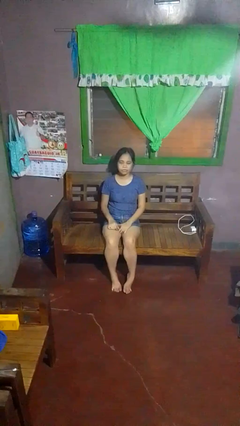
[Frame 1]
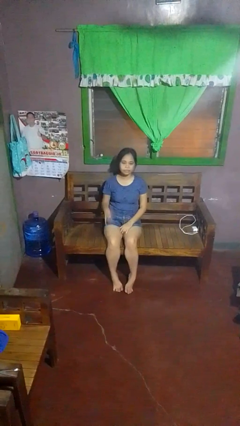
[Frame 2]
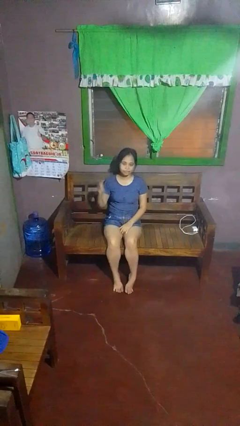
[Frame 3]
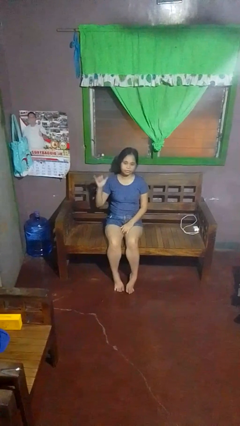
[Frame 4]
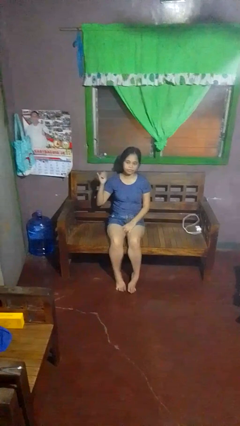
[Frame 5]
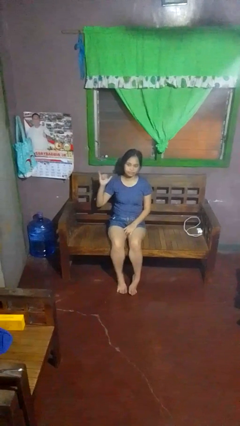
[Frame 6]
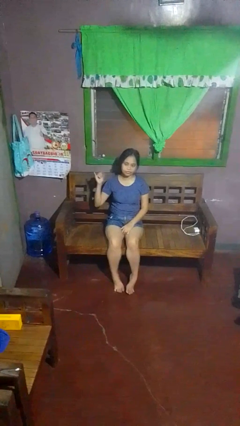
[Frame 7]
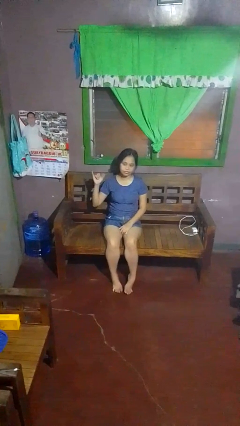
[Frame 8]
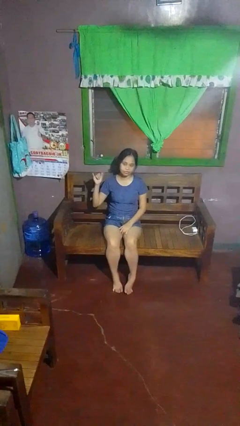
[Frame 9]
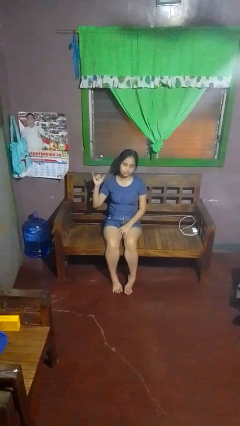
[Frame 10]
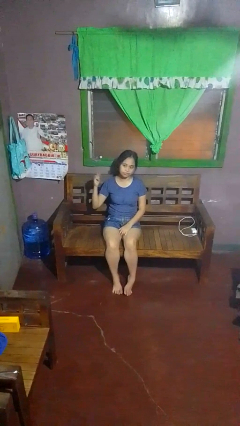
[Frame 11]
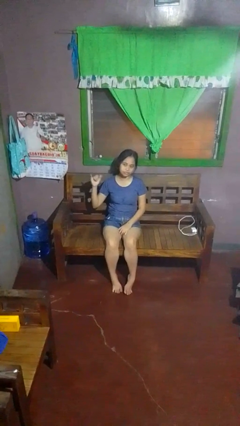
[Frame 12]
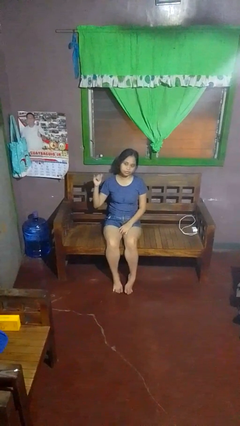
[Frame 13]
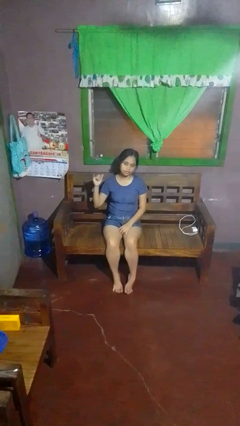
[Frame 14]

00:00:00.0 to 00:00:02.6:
person gestures hang loose

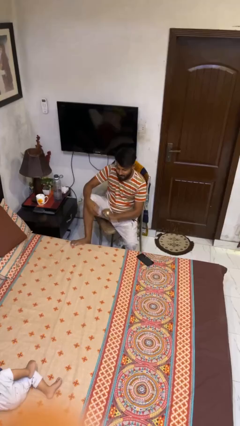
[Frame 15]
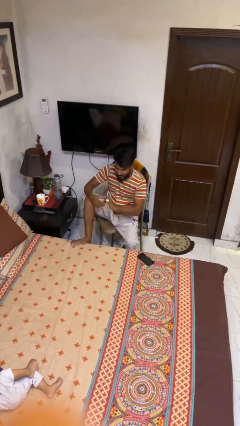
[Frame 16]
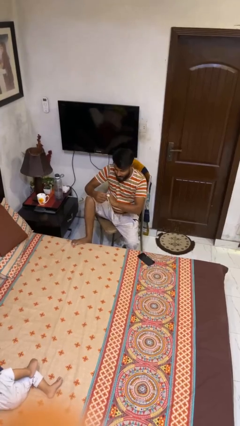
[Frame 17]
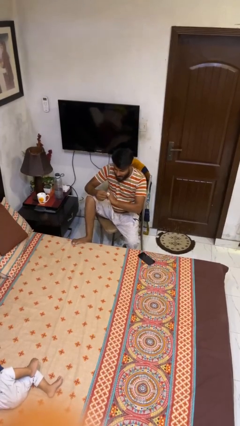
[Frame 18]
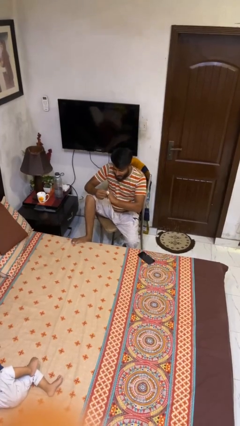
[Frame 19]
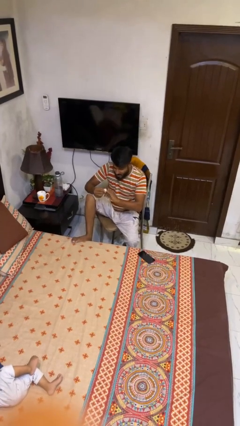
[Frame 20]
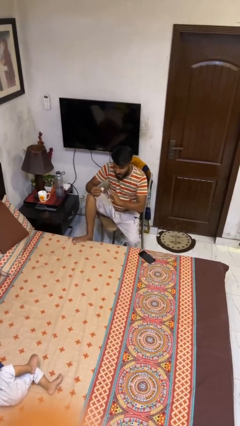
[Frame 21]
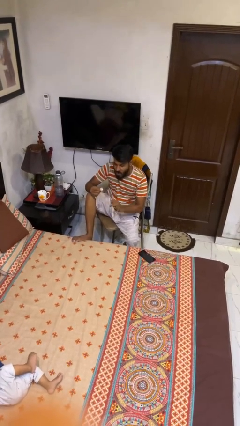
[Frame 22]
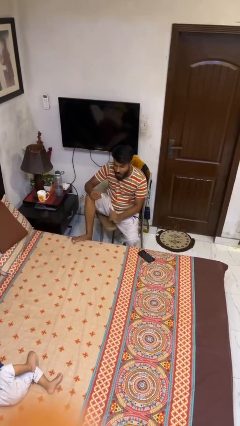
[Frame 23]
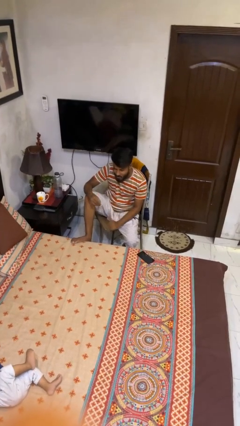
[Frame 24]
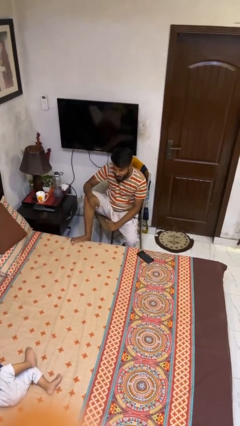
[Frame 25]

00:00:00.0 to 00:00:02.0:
person takes off ring

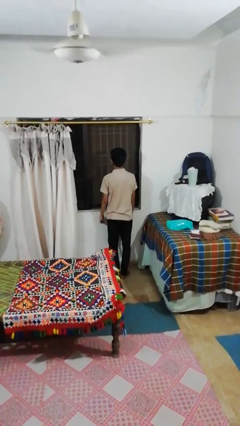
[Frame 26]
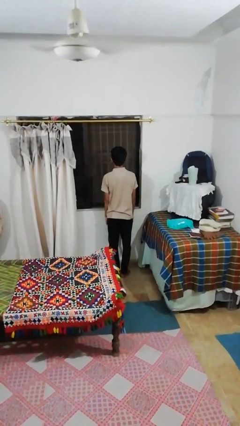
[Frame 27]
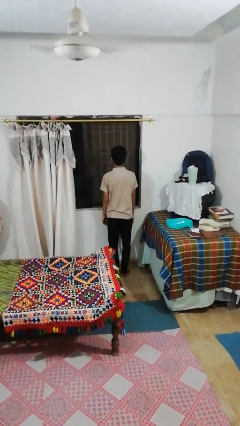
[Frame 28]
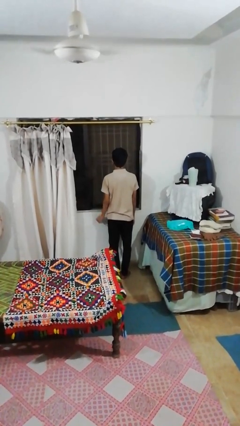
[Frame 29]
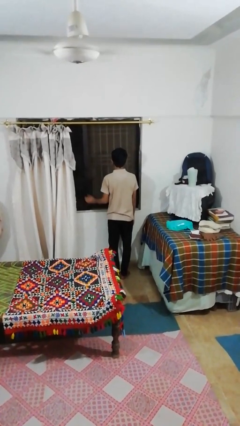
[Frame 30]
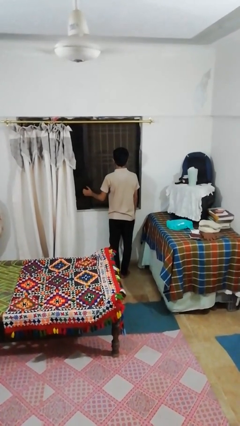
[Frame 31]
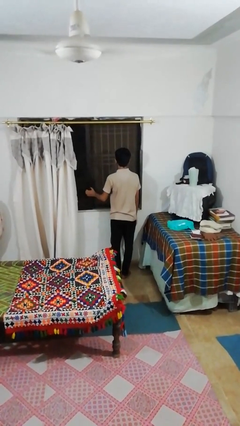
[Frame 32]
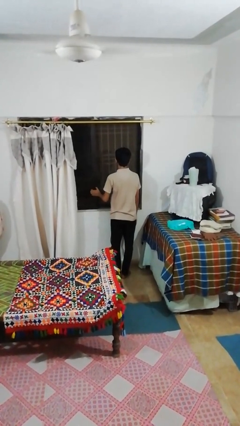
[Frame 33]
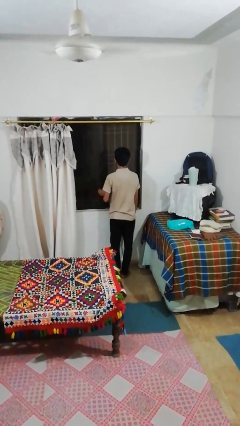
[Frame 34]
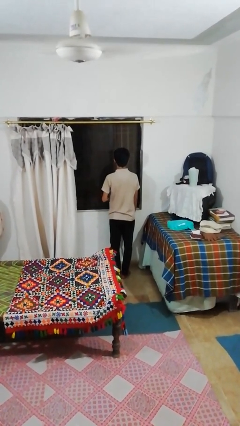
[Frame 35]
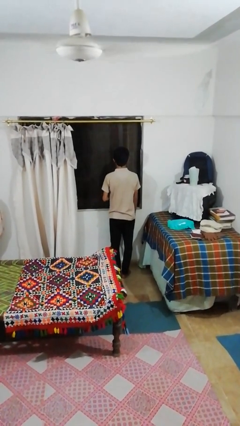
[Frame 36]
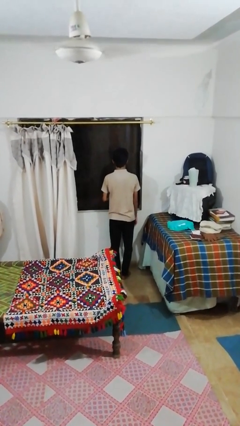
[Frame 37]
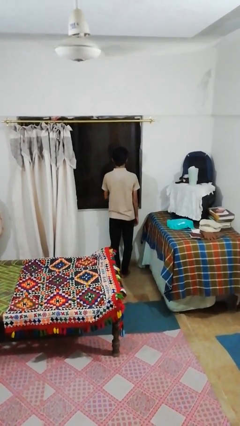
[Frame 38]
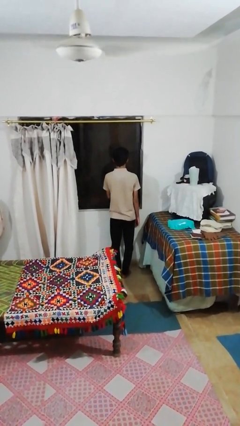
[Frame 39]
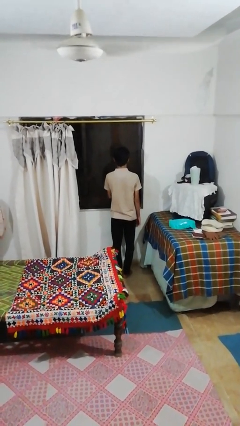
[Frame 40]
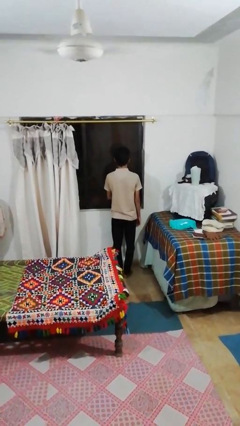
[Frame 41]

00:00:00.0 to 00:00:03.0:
person closes sliding door

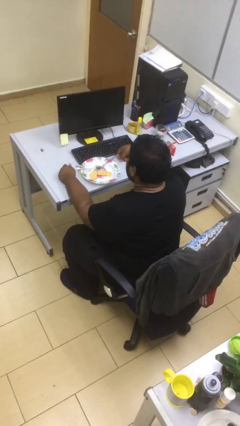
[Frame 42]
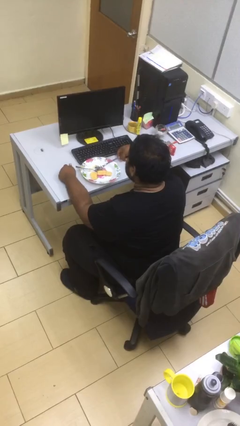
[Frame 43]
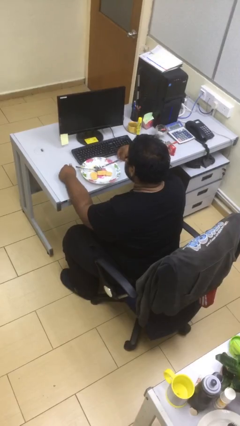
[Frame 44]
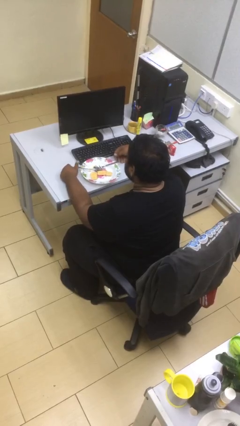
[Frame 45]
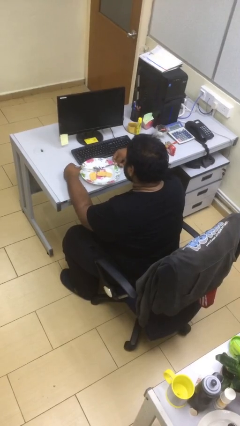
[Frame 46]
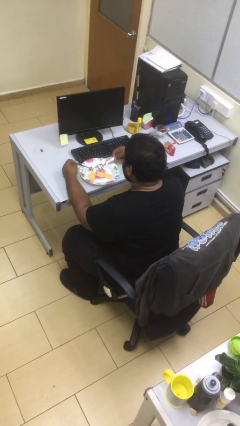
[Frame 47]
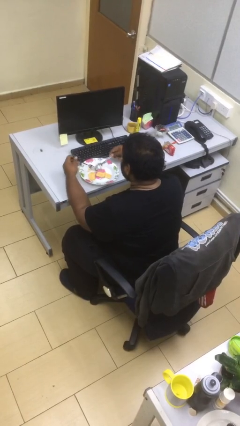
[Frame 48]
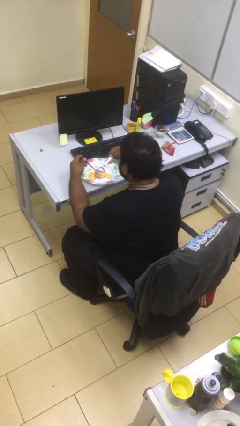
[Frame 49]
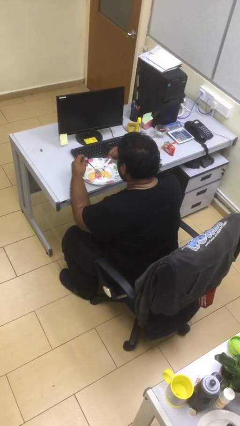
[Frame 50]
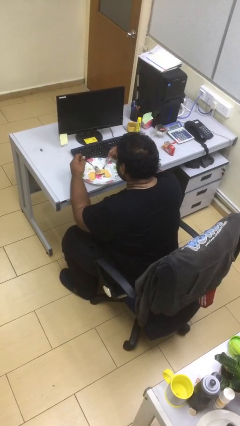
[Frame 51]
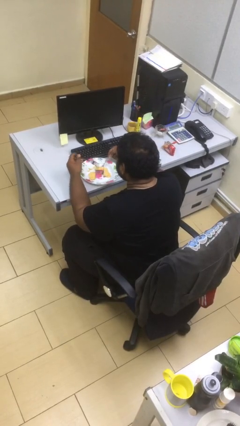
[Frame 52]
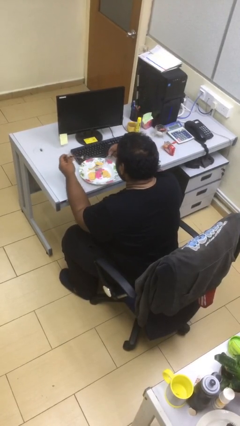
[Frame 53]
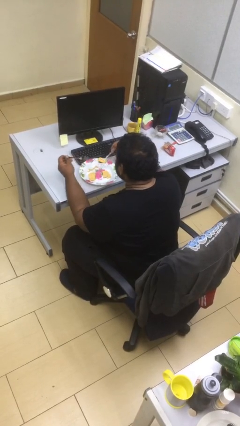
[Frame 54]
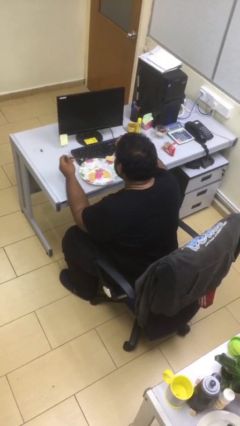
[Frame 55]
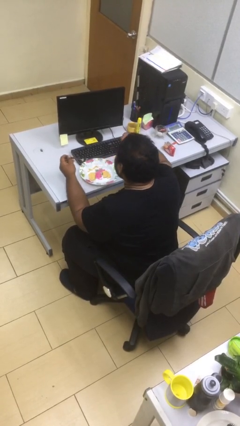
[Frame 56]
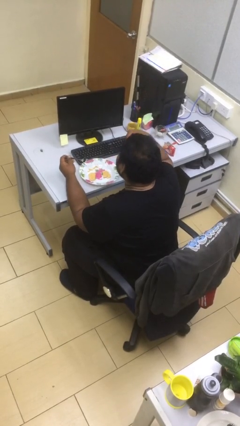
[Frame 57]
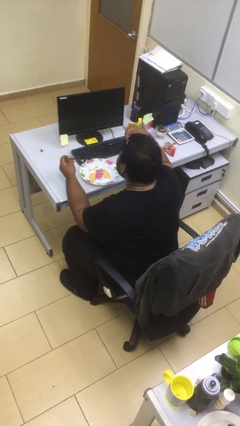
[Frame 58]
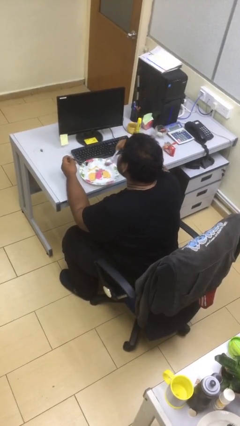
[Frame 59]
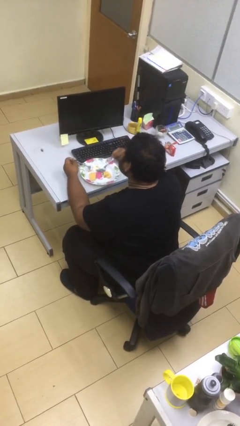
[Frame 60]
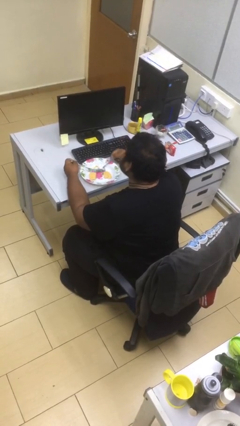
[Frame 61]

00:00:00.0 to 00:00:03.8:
person eats with utensil

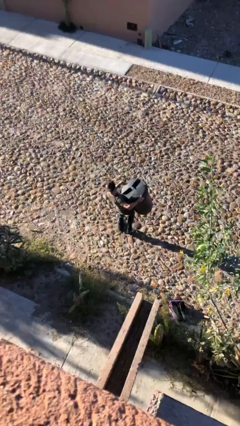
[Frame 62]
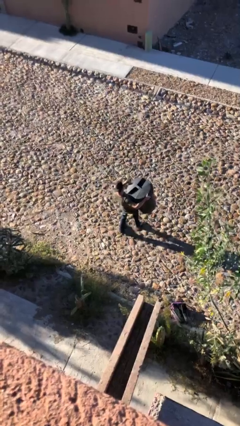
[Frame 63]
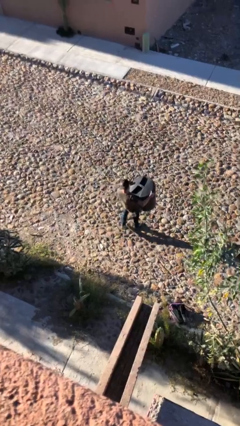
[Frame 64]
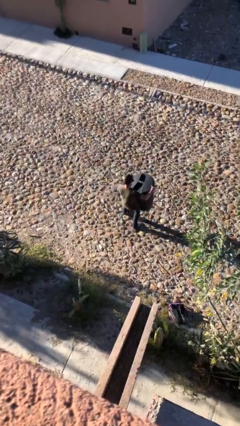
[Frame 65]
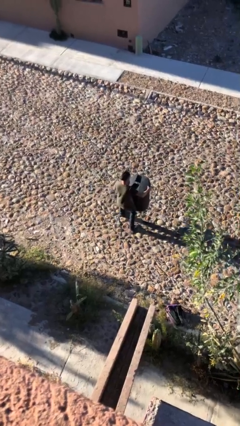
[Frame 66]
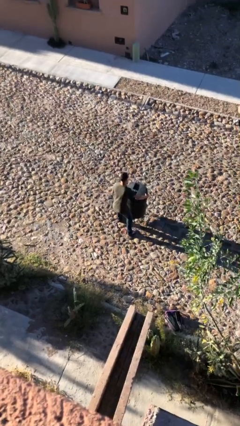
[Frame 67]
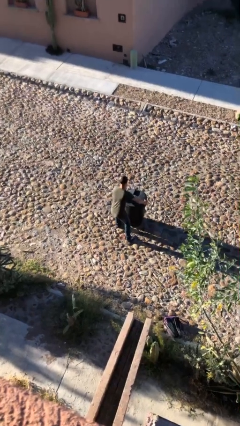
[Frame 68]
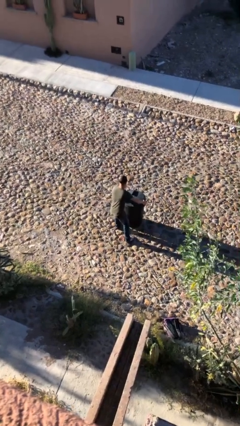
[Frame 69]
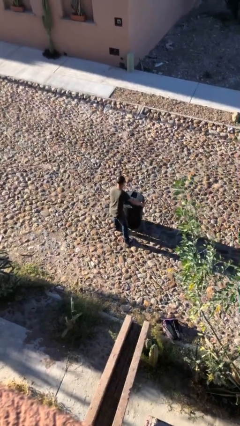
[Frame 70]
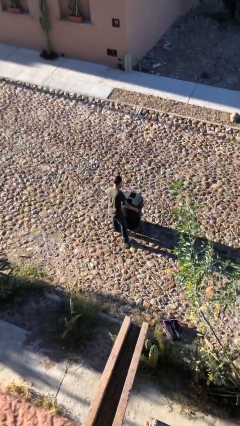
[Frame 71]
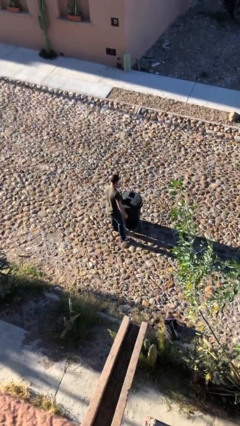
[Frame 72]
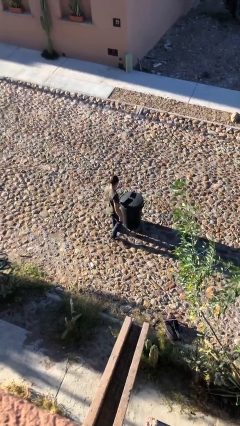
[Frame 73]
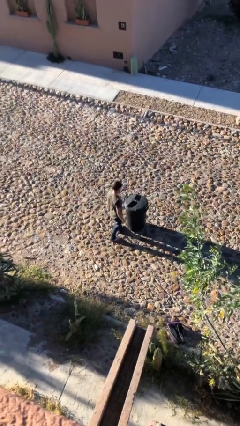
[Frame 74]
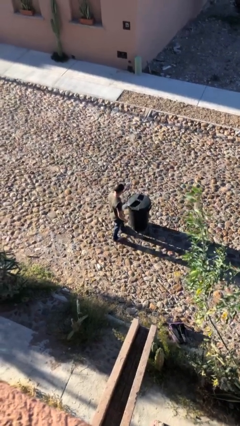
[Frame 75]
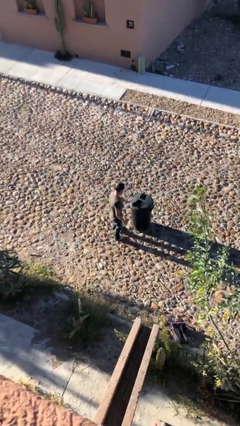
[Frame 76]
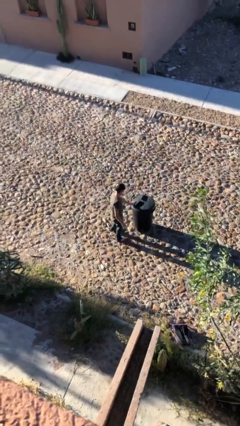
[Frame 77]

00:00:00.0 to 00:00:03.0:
person puts down object on floor

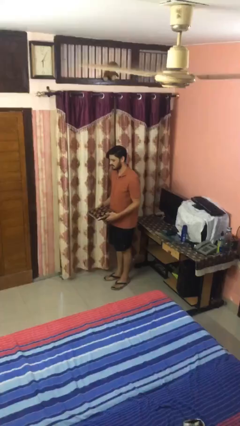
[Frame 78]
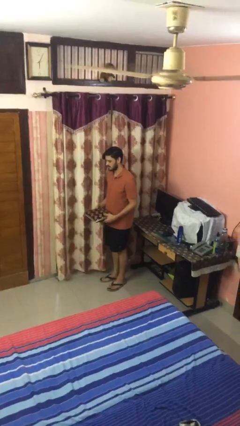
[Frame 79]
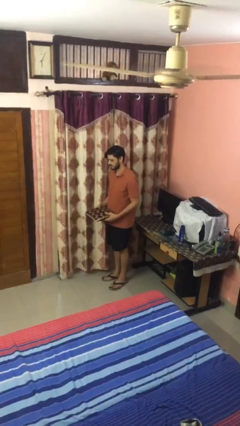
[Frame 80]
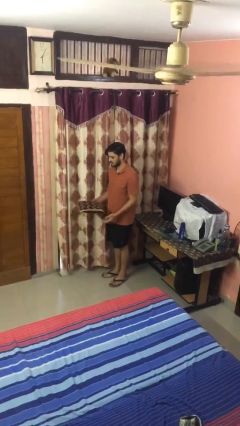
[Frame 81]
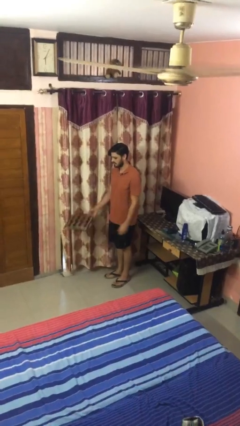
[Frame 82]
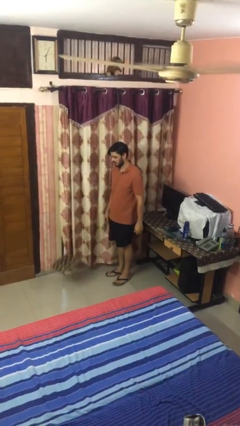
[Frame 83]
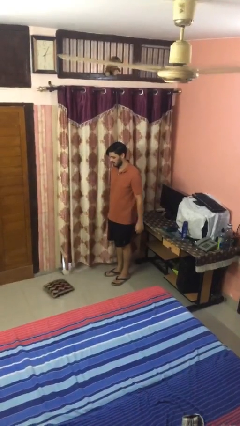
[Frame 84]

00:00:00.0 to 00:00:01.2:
person throws object to ground

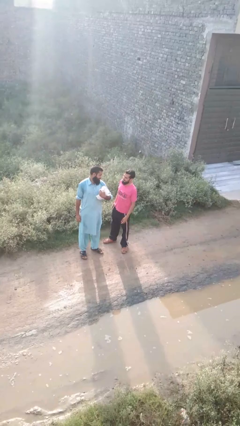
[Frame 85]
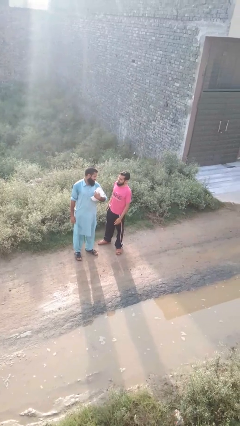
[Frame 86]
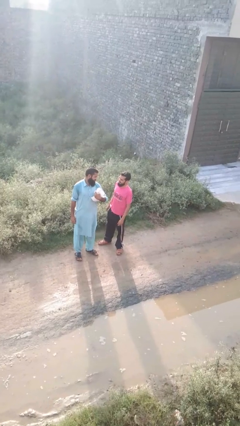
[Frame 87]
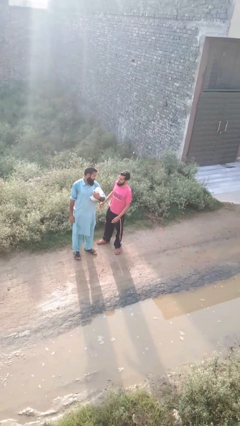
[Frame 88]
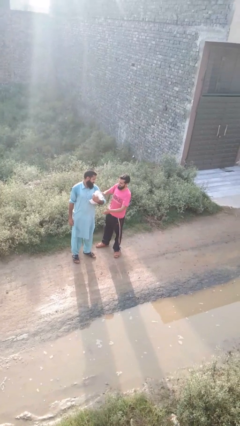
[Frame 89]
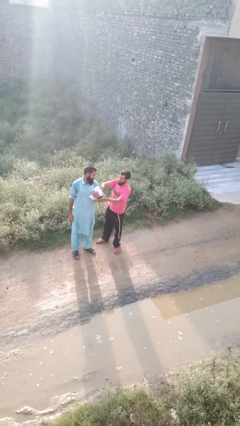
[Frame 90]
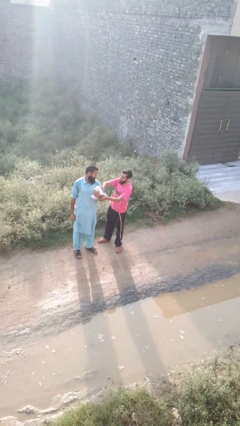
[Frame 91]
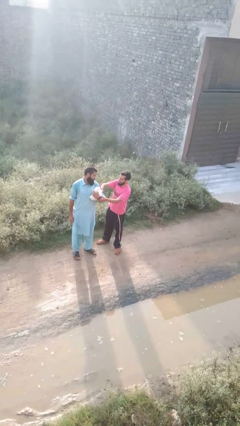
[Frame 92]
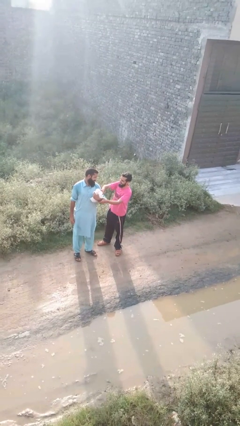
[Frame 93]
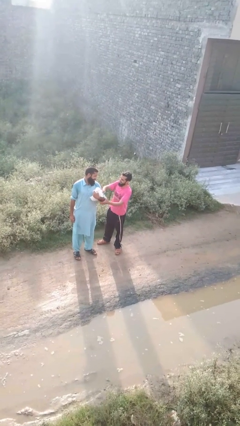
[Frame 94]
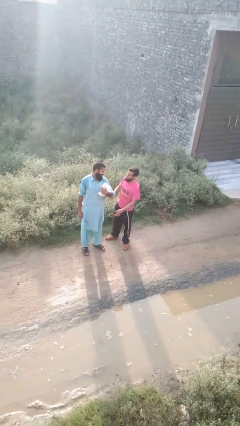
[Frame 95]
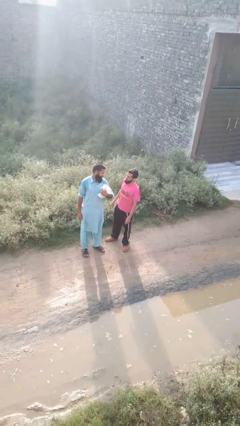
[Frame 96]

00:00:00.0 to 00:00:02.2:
person grabs person by bicep
